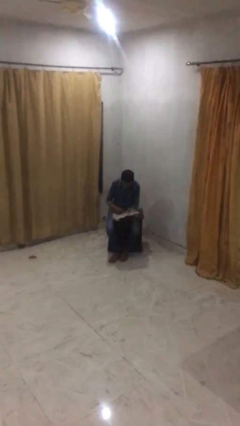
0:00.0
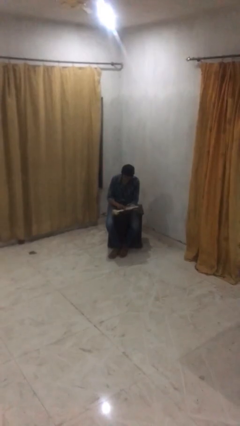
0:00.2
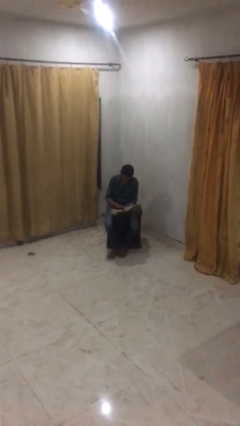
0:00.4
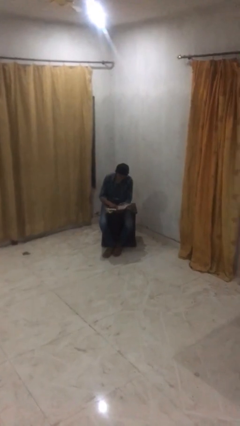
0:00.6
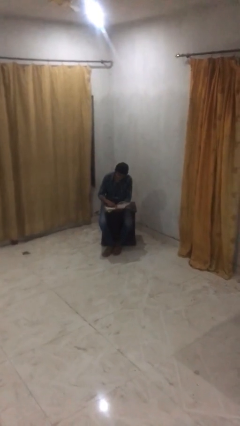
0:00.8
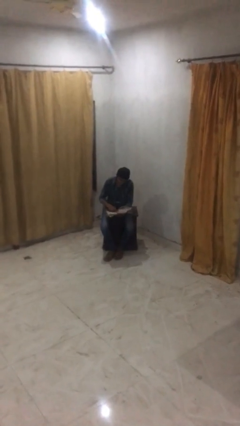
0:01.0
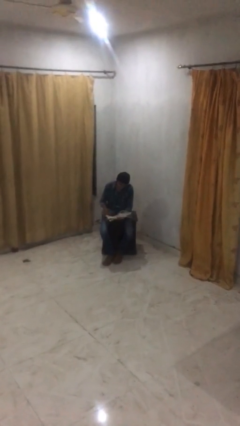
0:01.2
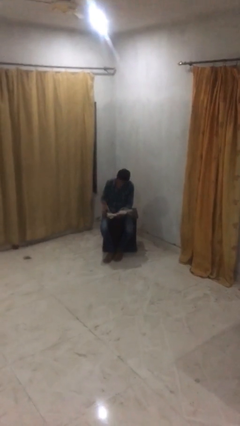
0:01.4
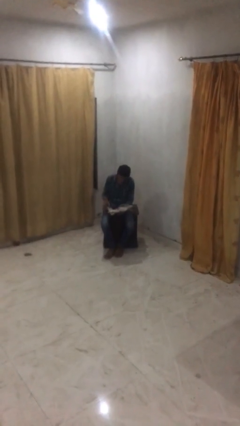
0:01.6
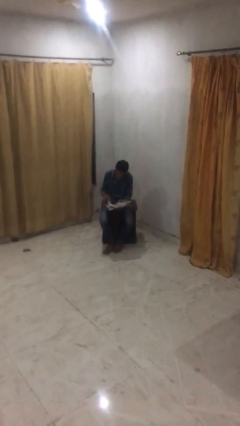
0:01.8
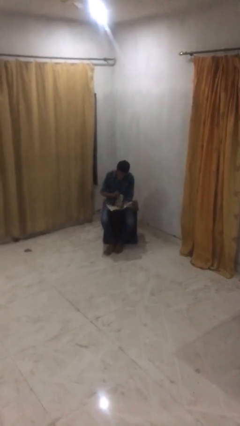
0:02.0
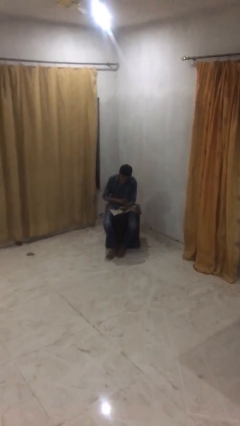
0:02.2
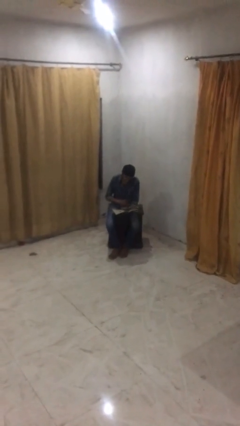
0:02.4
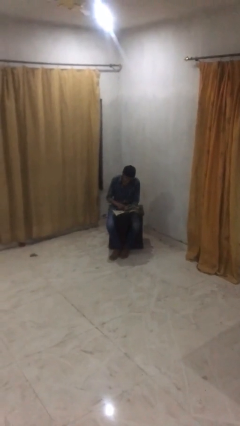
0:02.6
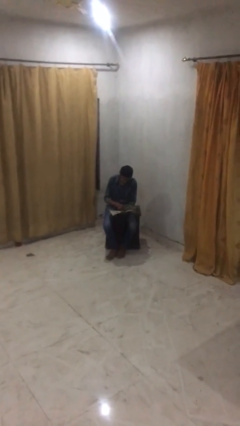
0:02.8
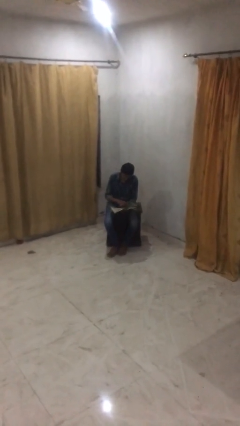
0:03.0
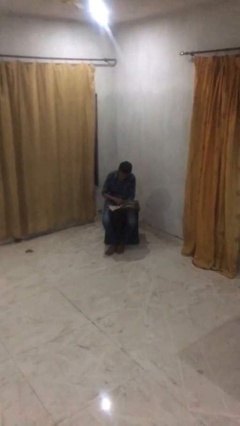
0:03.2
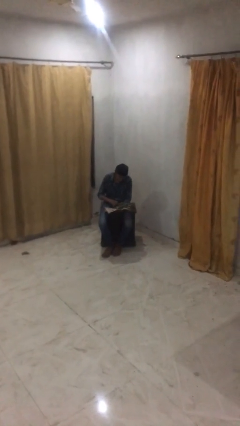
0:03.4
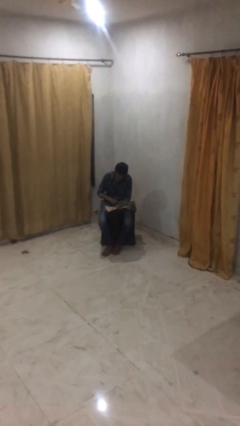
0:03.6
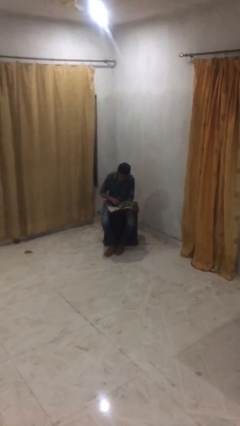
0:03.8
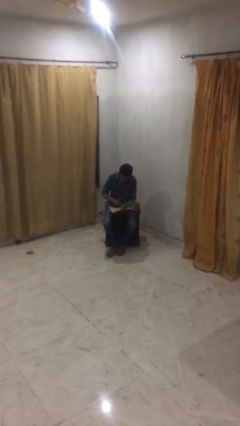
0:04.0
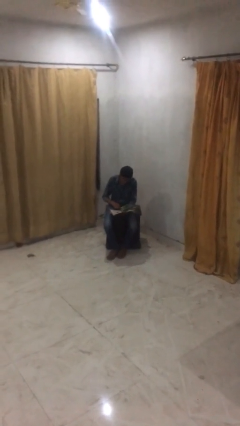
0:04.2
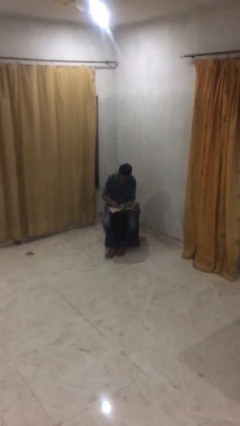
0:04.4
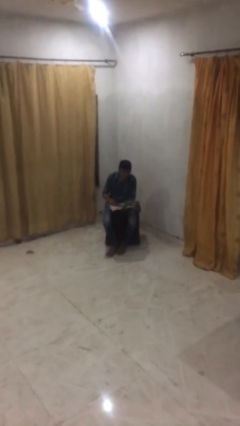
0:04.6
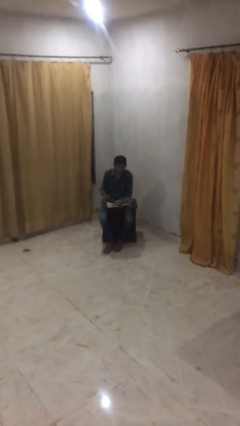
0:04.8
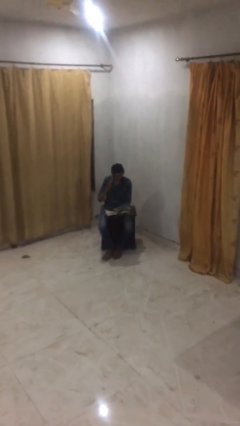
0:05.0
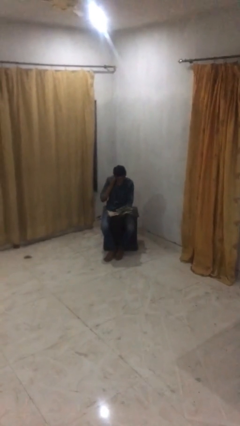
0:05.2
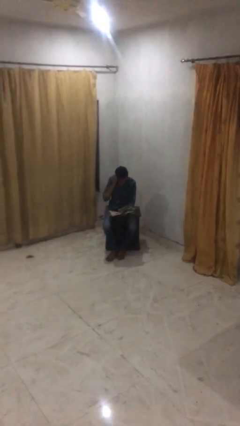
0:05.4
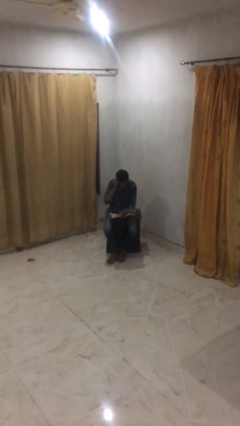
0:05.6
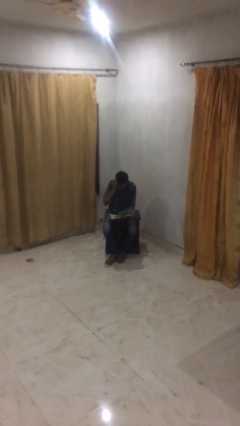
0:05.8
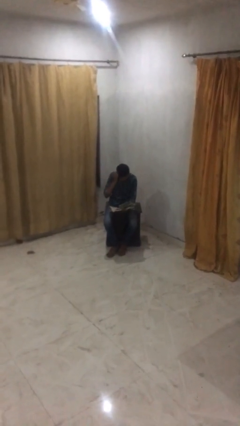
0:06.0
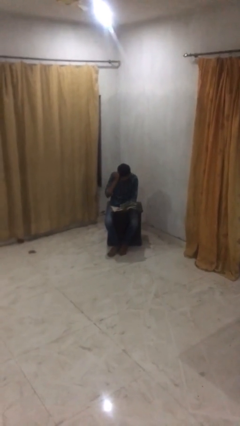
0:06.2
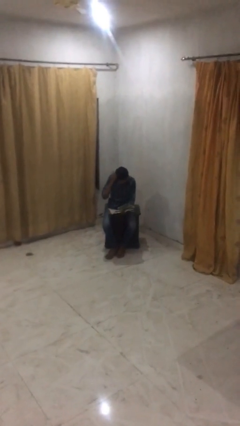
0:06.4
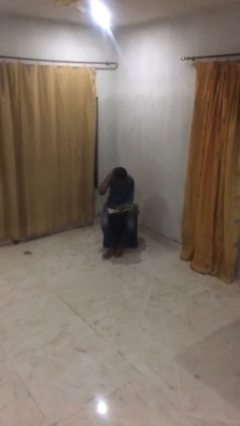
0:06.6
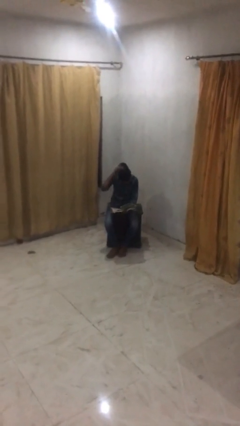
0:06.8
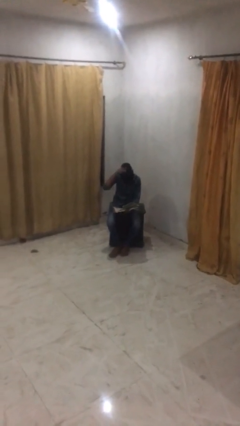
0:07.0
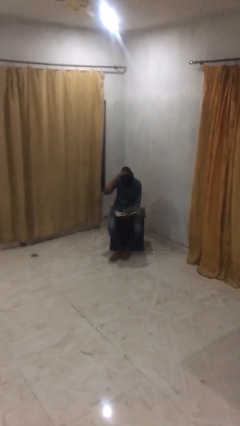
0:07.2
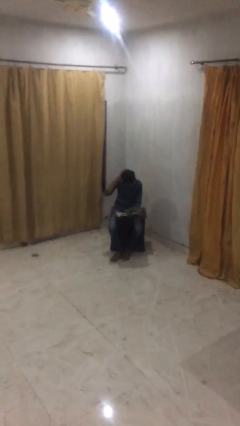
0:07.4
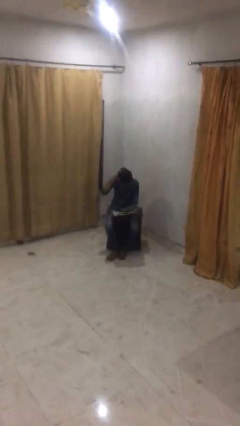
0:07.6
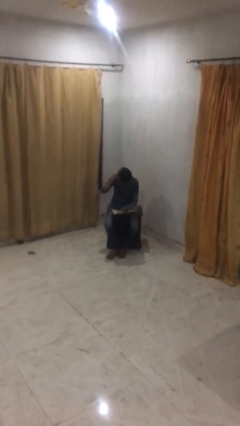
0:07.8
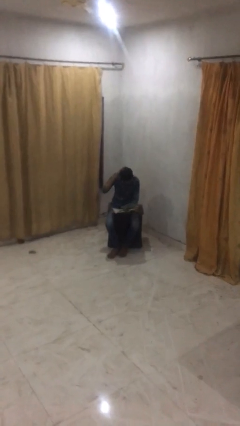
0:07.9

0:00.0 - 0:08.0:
person reads document

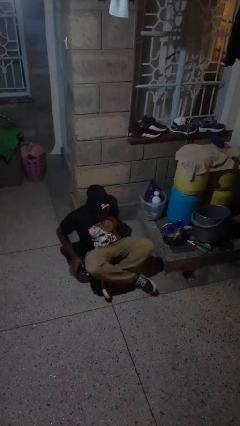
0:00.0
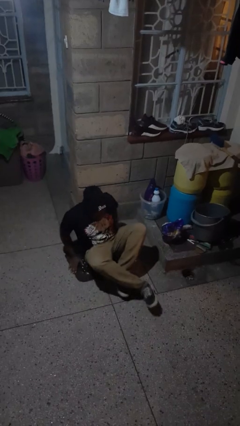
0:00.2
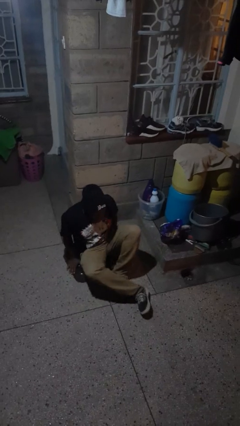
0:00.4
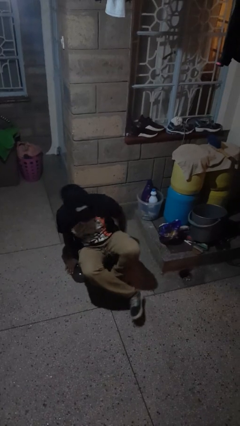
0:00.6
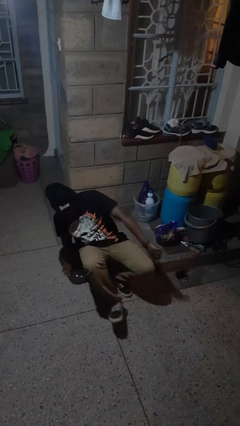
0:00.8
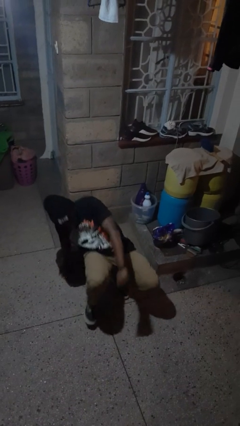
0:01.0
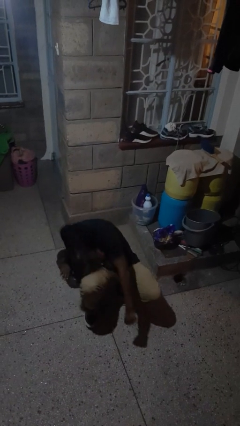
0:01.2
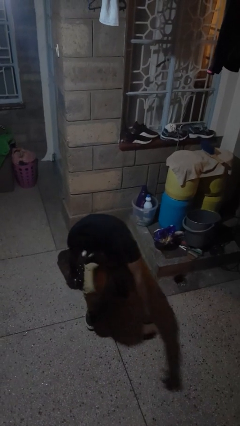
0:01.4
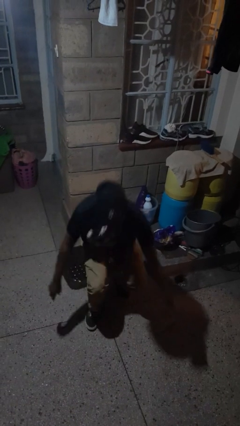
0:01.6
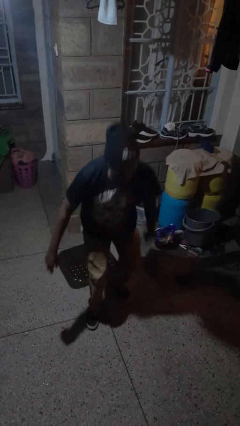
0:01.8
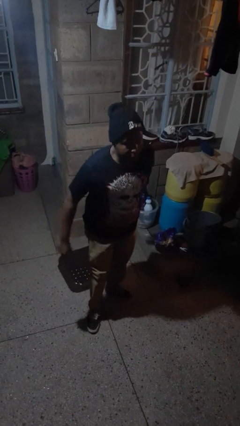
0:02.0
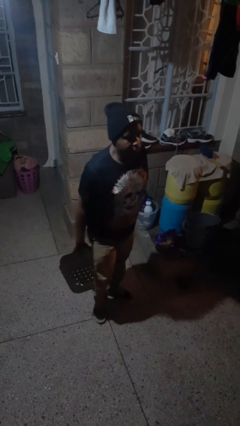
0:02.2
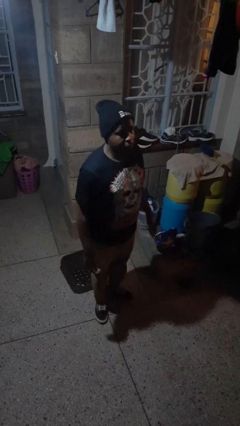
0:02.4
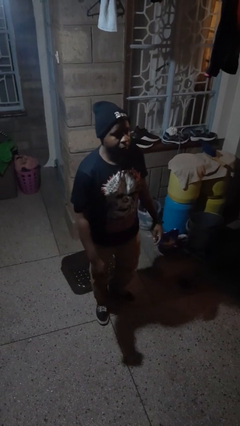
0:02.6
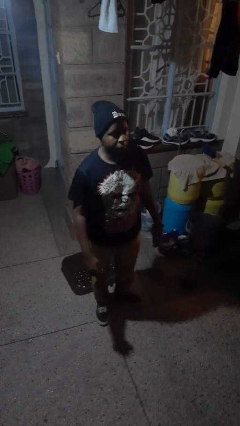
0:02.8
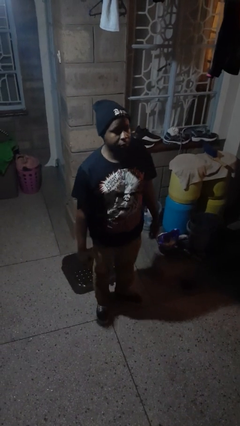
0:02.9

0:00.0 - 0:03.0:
person stands up from floor

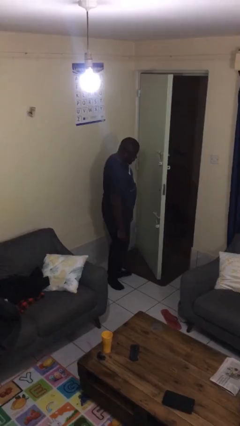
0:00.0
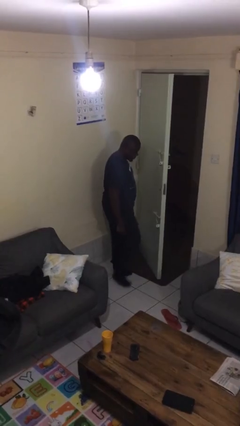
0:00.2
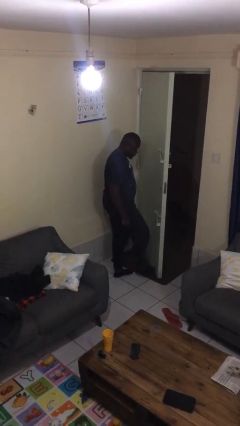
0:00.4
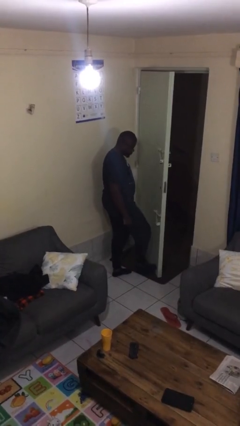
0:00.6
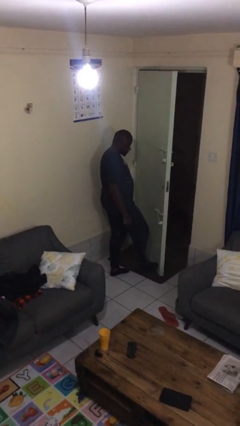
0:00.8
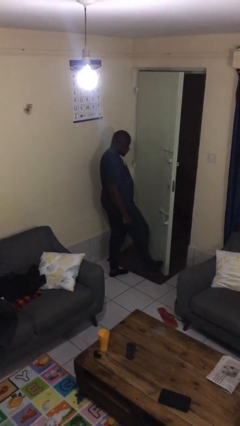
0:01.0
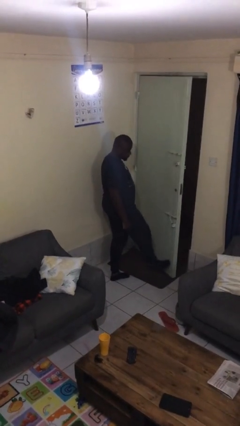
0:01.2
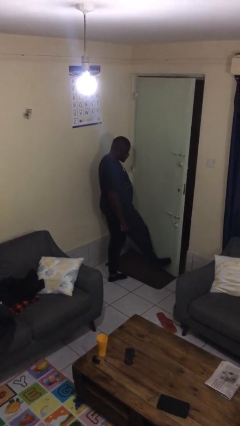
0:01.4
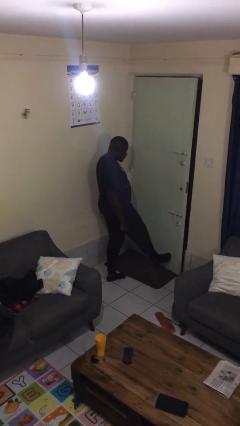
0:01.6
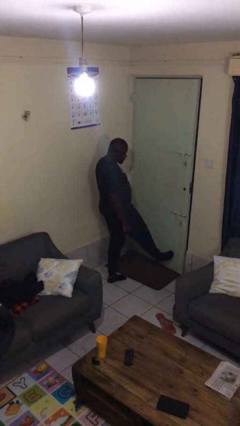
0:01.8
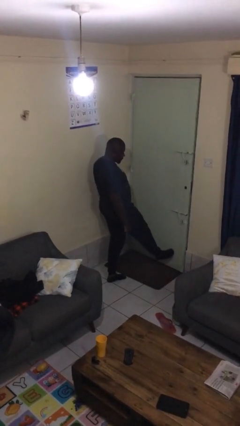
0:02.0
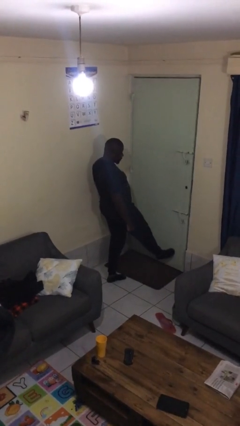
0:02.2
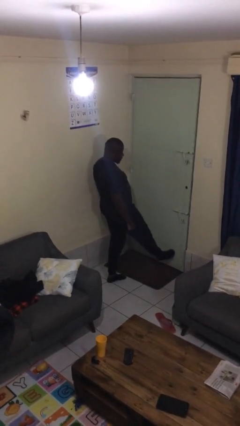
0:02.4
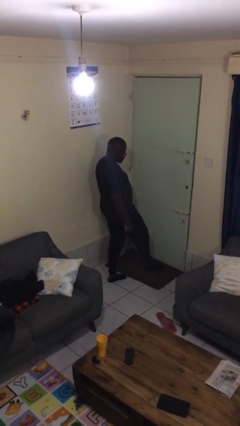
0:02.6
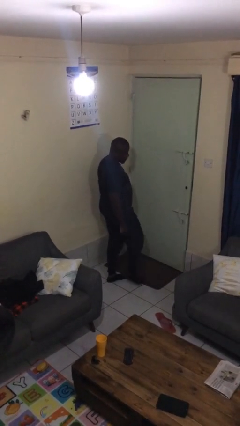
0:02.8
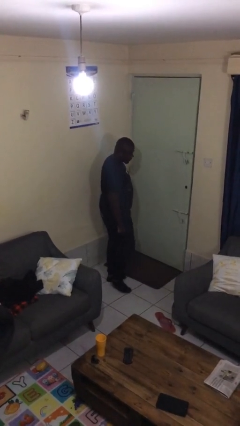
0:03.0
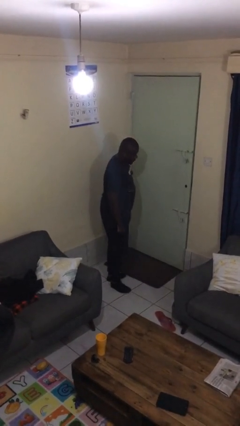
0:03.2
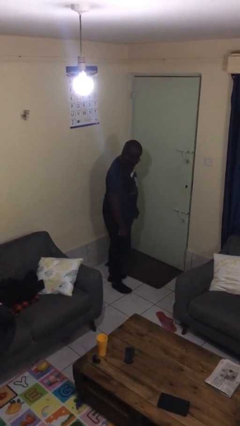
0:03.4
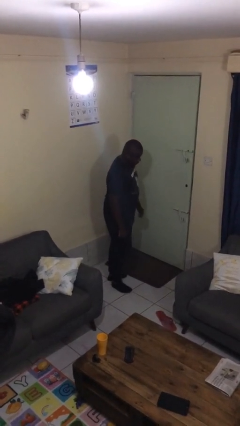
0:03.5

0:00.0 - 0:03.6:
person closes door with foot

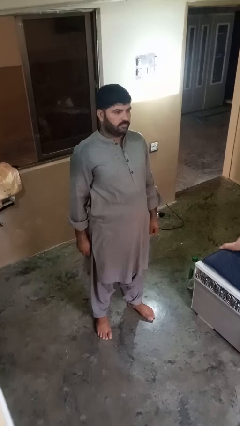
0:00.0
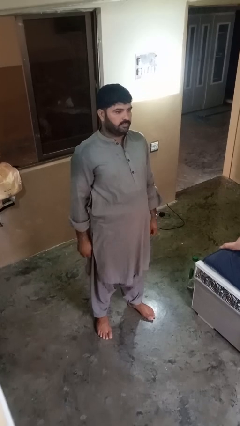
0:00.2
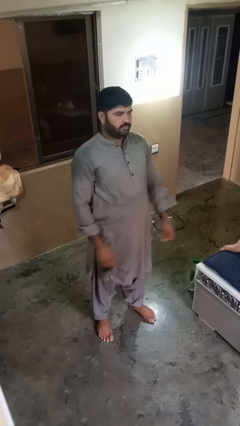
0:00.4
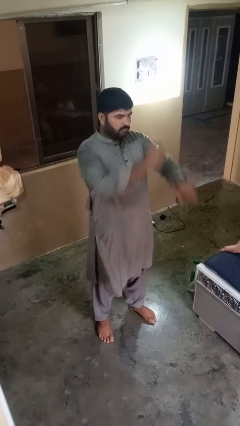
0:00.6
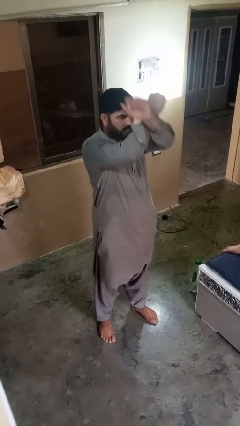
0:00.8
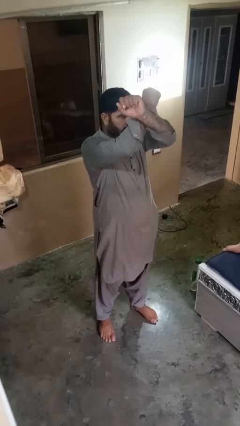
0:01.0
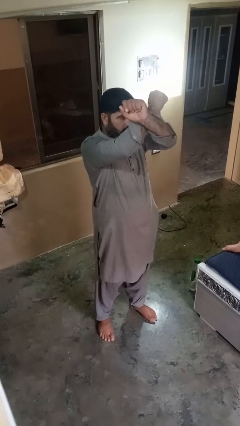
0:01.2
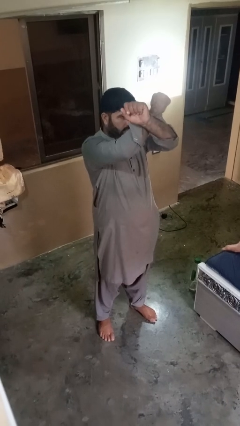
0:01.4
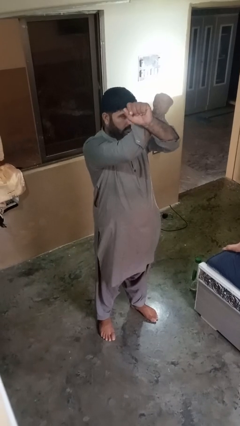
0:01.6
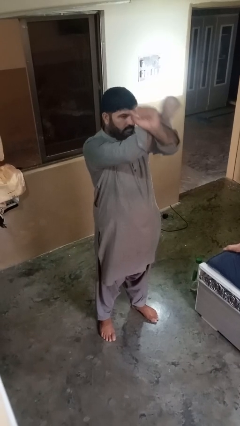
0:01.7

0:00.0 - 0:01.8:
person gestures arms x

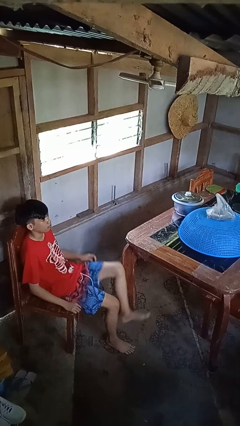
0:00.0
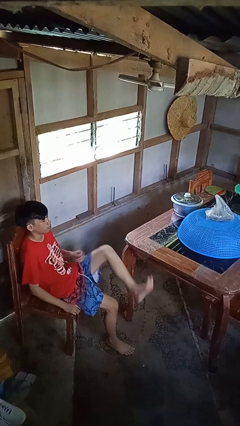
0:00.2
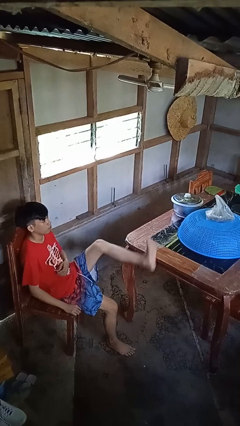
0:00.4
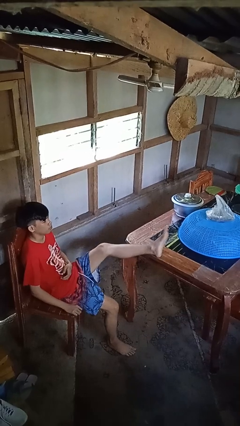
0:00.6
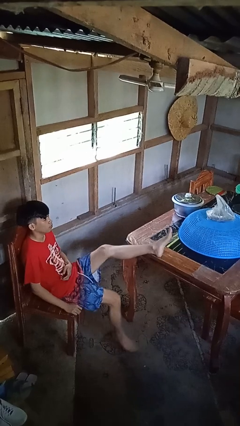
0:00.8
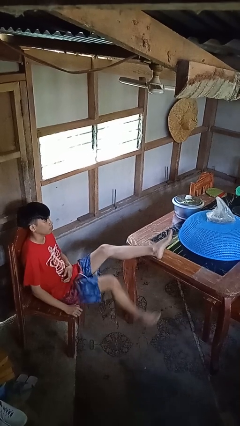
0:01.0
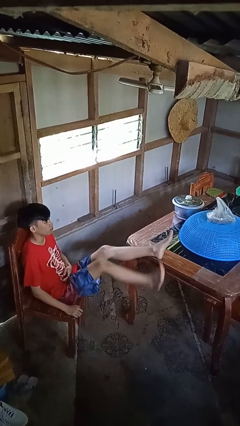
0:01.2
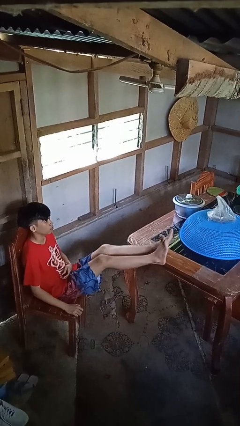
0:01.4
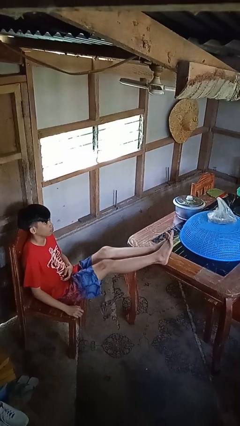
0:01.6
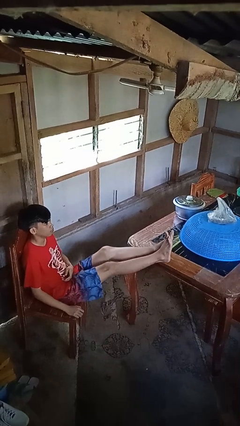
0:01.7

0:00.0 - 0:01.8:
person puts feet up
